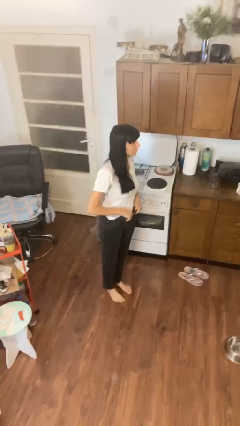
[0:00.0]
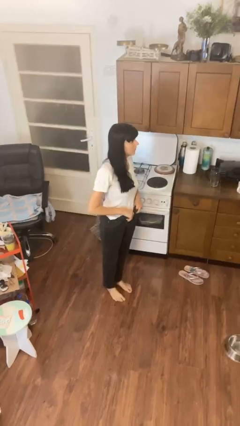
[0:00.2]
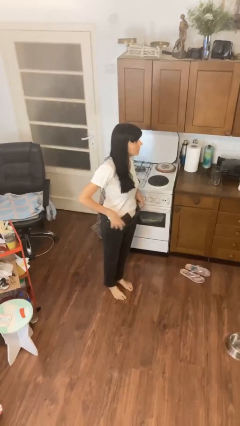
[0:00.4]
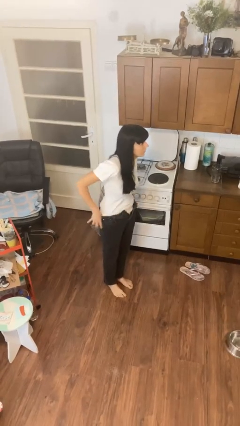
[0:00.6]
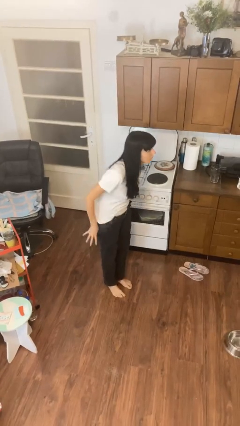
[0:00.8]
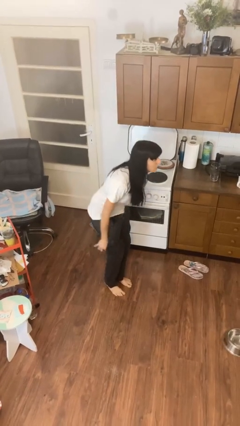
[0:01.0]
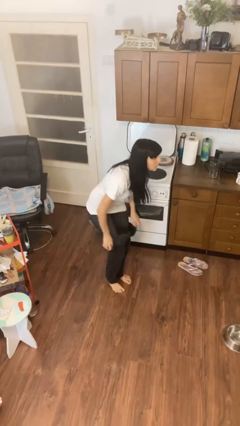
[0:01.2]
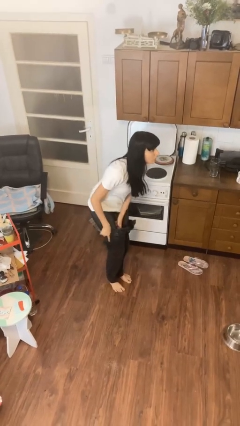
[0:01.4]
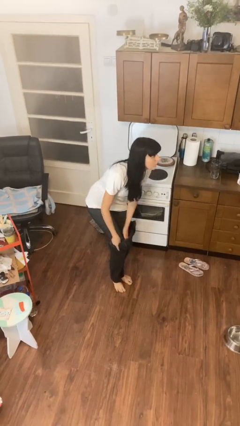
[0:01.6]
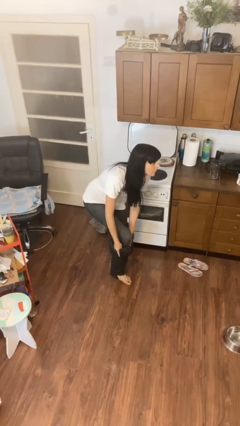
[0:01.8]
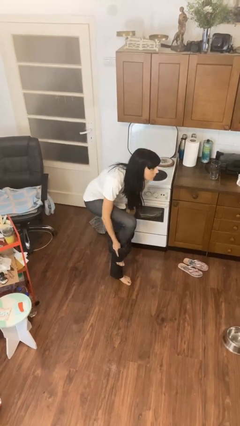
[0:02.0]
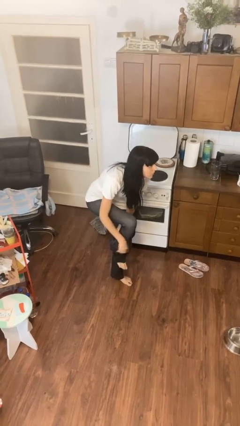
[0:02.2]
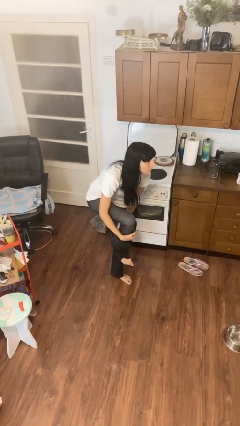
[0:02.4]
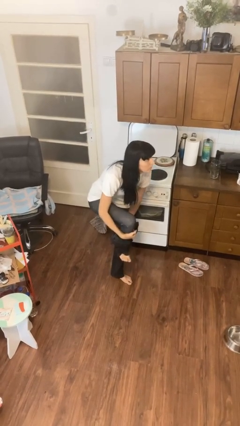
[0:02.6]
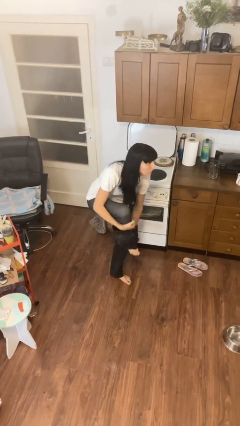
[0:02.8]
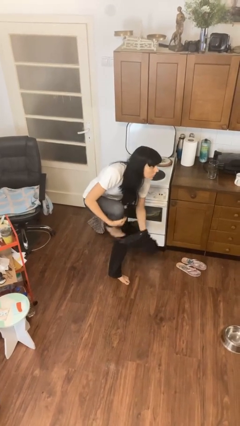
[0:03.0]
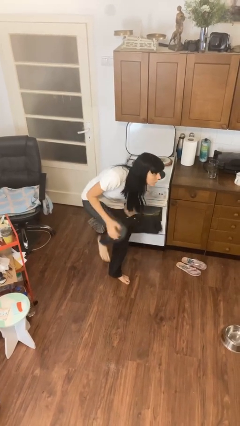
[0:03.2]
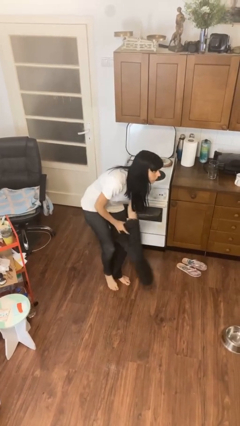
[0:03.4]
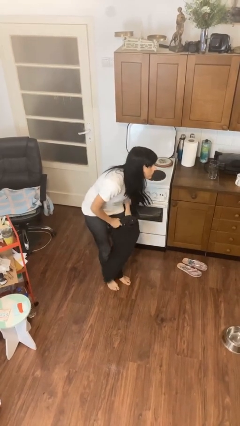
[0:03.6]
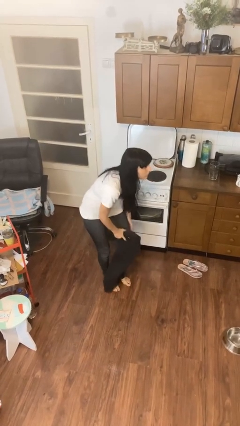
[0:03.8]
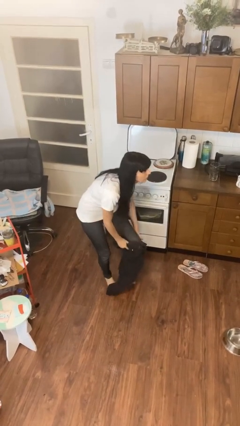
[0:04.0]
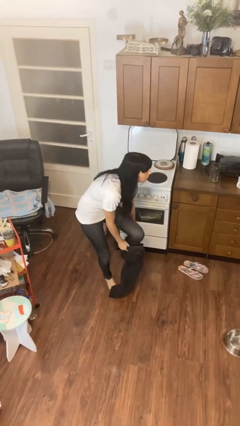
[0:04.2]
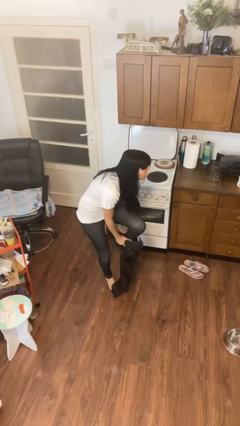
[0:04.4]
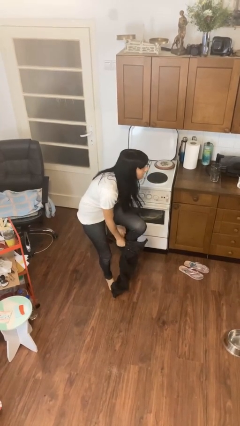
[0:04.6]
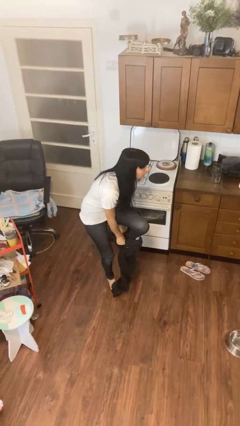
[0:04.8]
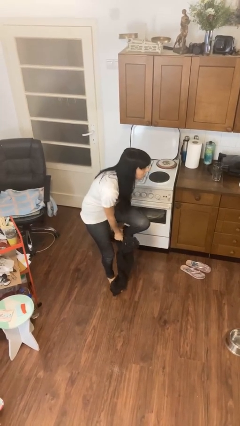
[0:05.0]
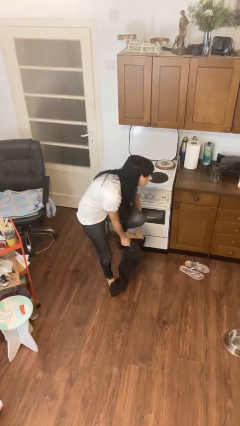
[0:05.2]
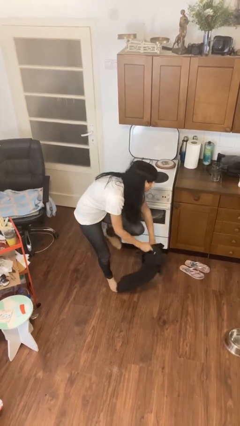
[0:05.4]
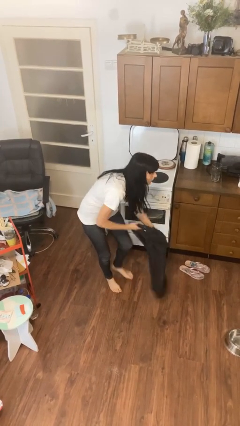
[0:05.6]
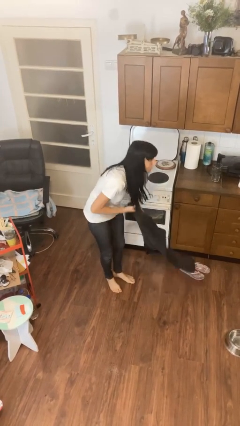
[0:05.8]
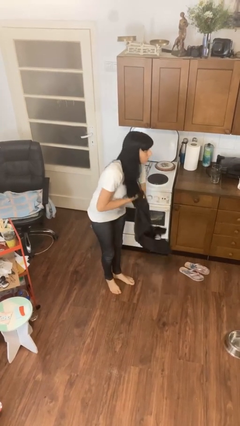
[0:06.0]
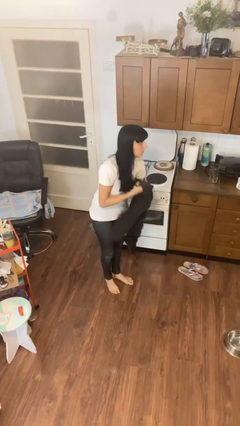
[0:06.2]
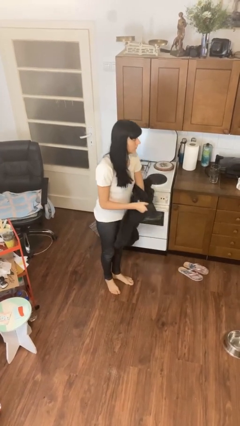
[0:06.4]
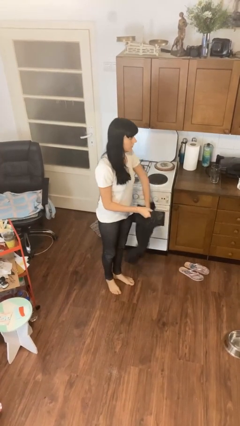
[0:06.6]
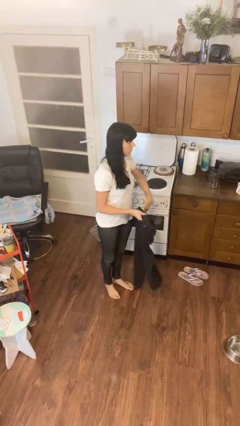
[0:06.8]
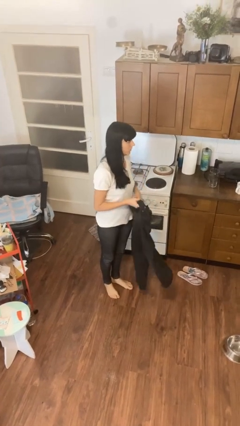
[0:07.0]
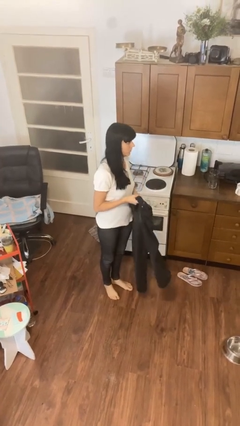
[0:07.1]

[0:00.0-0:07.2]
person takes off pants

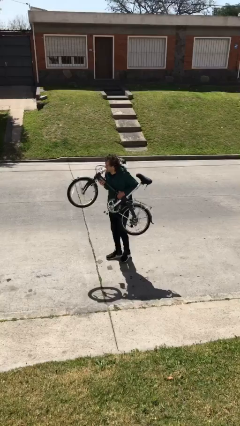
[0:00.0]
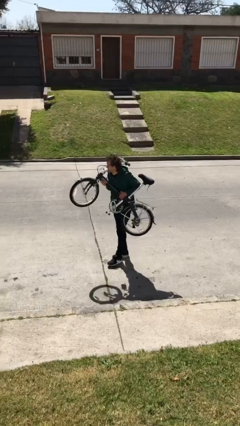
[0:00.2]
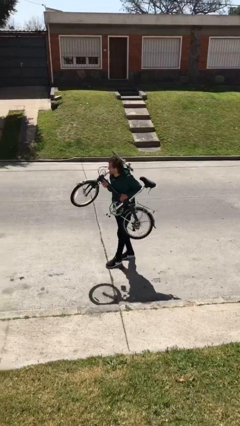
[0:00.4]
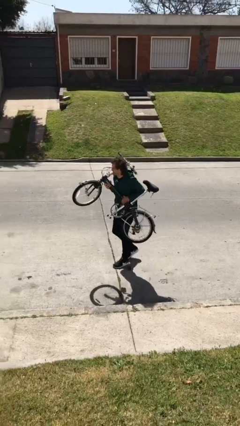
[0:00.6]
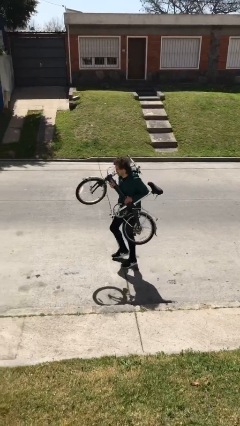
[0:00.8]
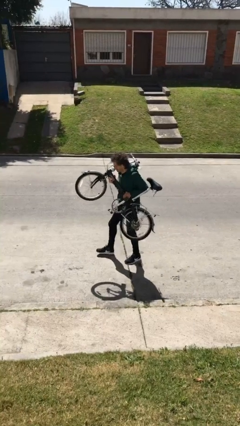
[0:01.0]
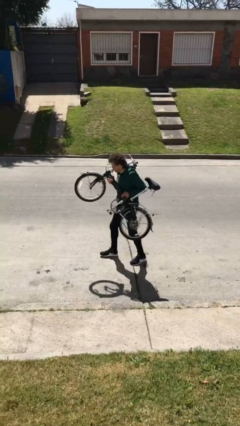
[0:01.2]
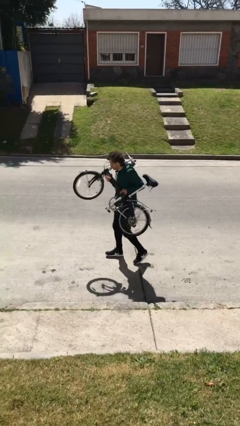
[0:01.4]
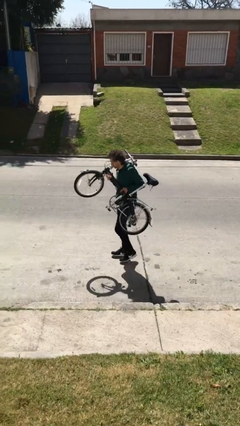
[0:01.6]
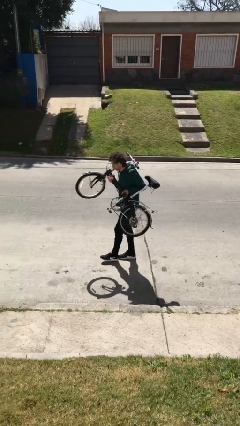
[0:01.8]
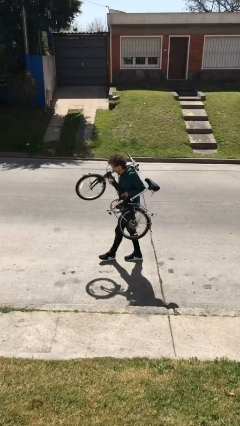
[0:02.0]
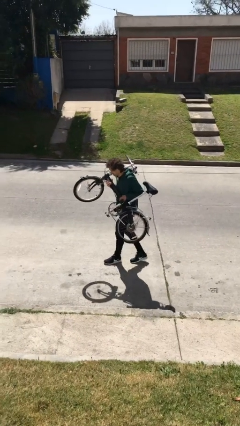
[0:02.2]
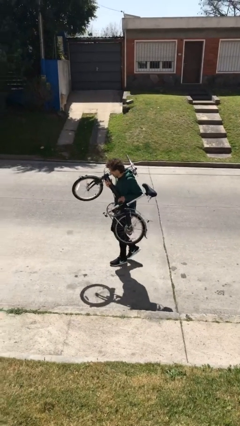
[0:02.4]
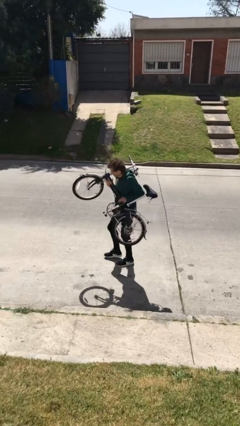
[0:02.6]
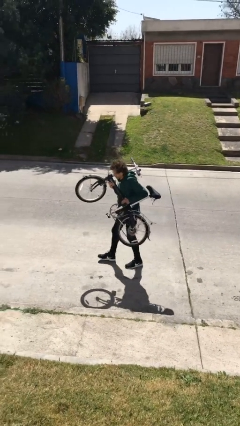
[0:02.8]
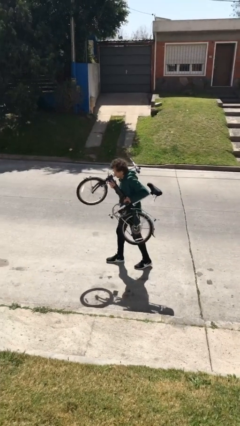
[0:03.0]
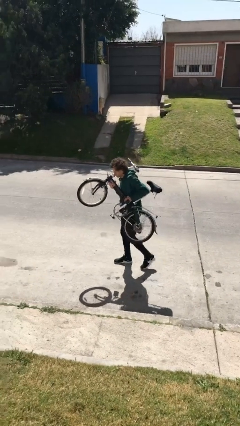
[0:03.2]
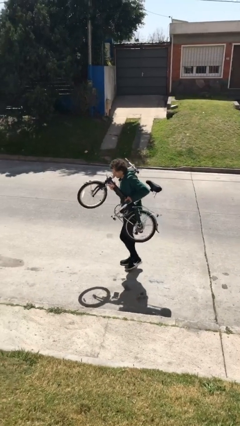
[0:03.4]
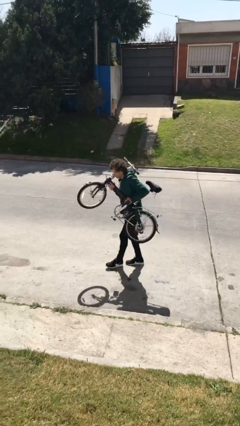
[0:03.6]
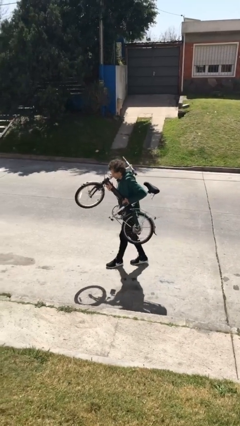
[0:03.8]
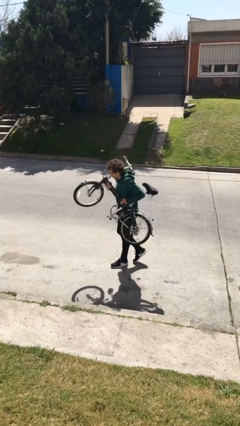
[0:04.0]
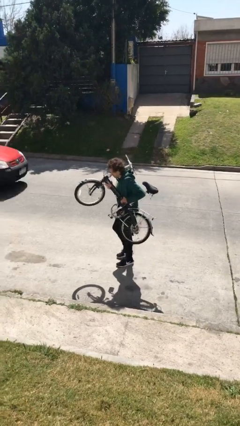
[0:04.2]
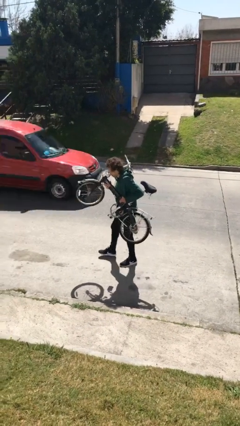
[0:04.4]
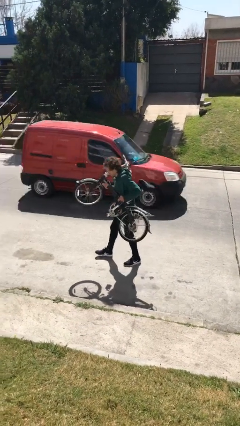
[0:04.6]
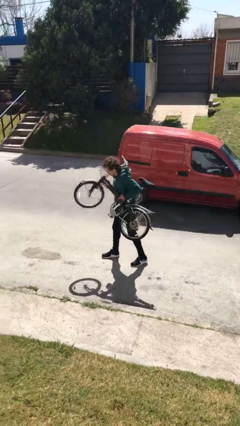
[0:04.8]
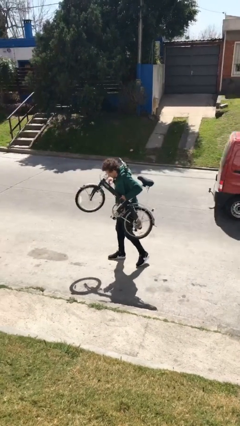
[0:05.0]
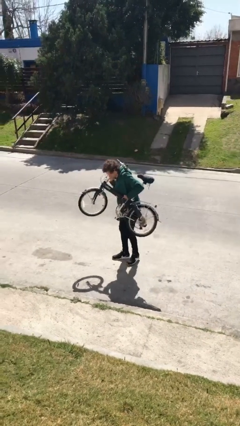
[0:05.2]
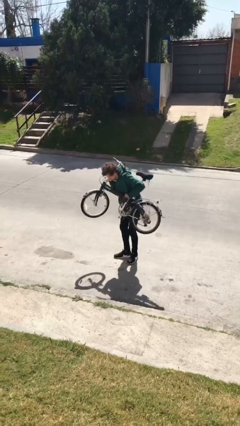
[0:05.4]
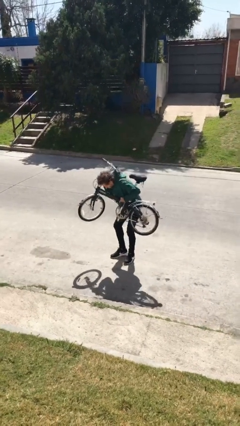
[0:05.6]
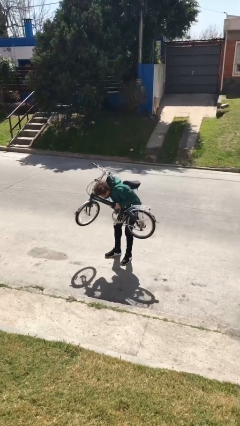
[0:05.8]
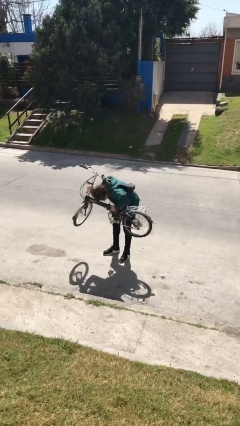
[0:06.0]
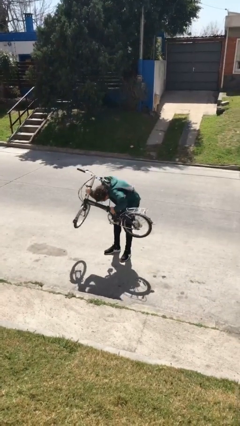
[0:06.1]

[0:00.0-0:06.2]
person carries heavy object

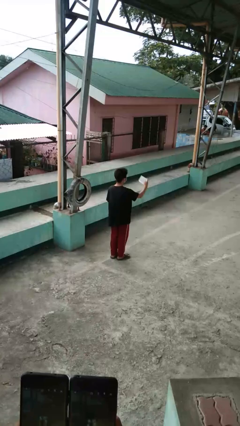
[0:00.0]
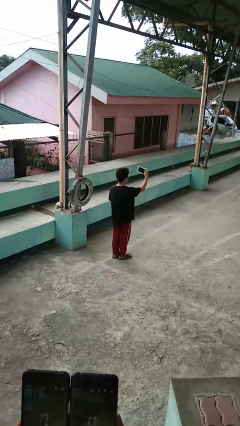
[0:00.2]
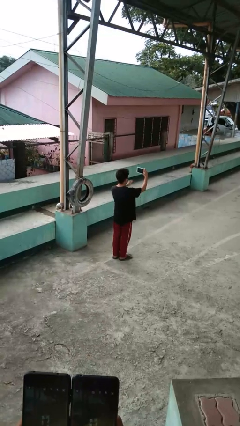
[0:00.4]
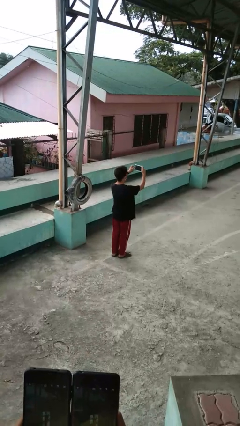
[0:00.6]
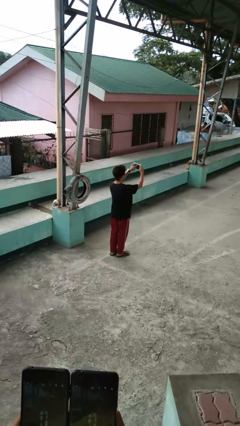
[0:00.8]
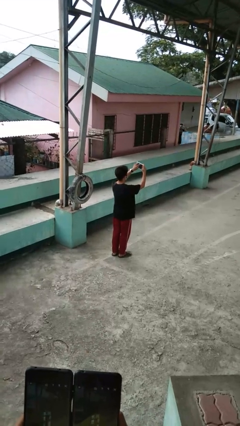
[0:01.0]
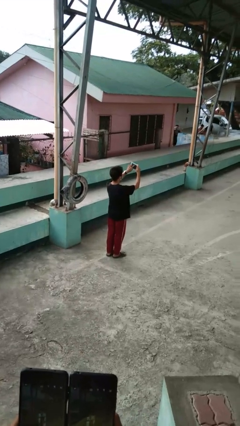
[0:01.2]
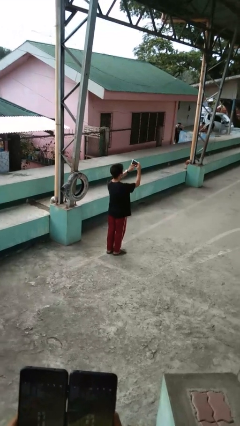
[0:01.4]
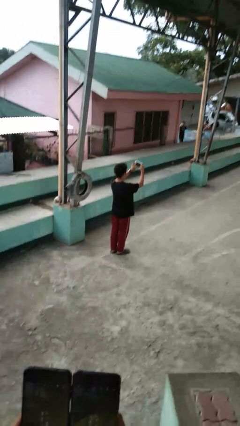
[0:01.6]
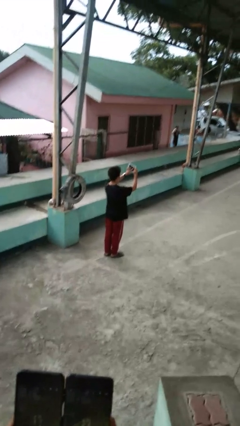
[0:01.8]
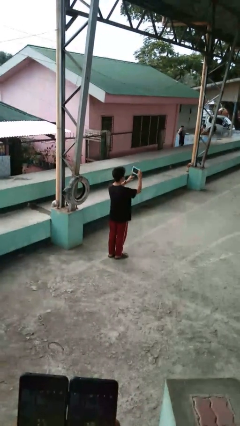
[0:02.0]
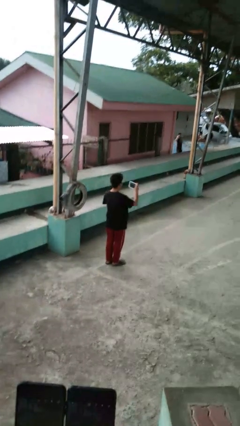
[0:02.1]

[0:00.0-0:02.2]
person interacts with tablet

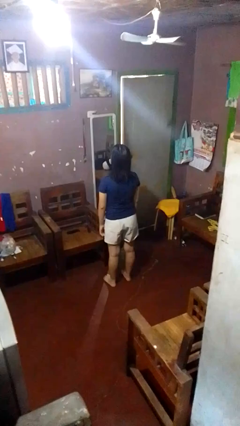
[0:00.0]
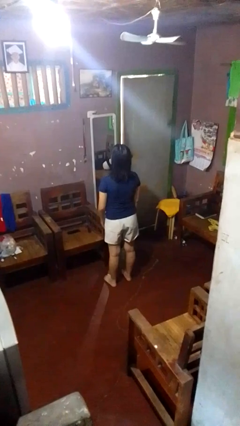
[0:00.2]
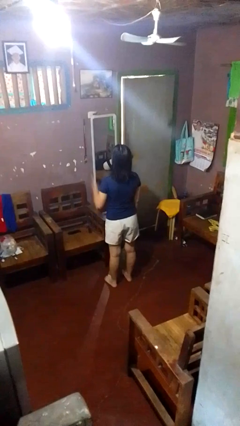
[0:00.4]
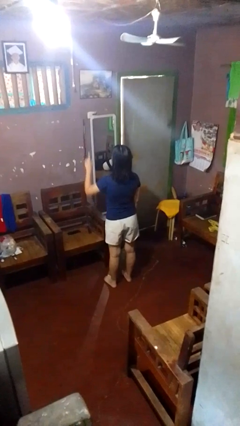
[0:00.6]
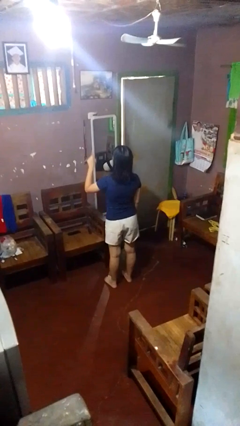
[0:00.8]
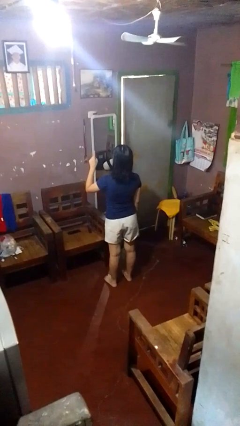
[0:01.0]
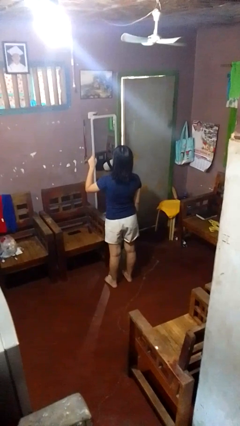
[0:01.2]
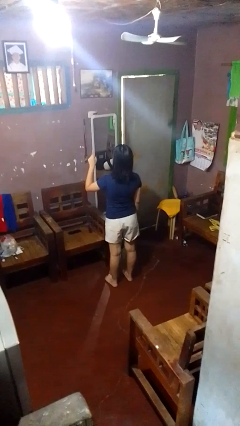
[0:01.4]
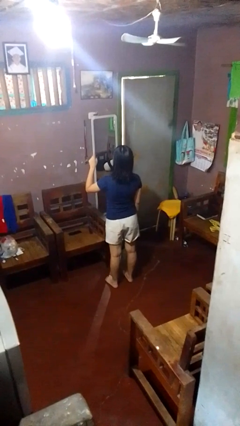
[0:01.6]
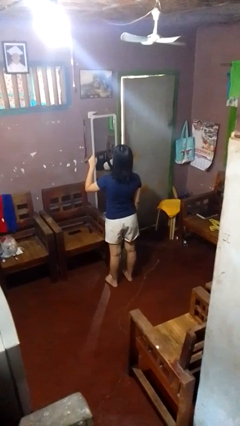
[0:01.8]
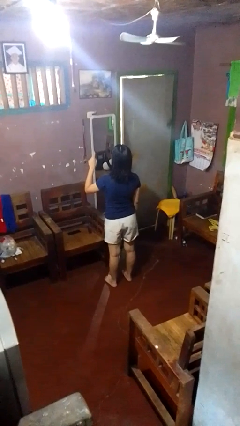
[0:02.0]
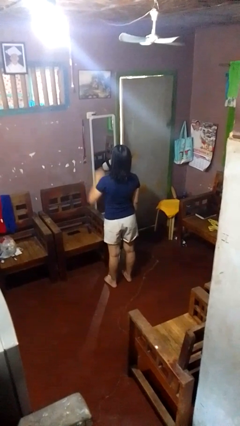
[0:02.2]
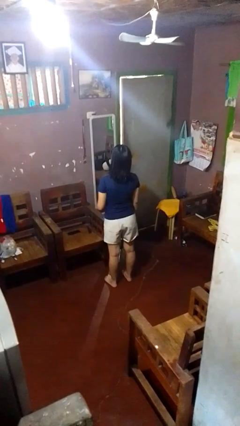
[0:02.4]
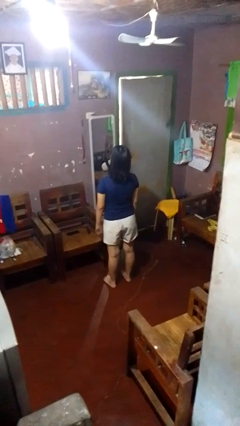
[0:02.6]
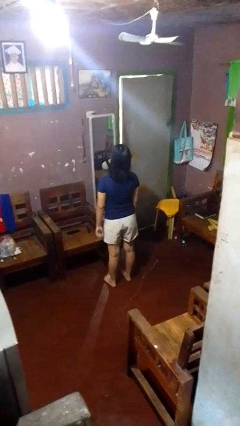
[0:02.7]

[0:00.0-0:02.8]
person gestures number one
